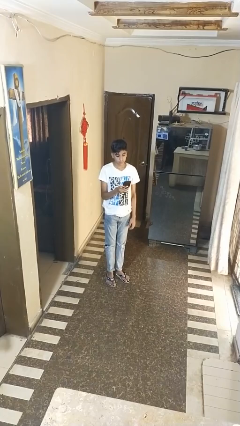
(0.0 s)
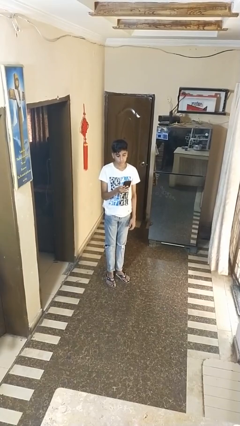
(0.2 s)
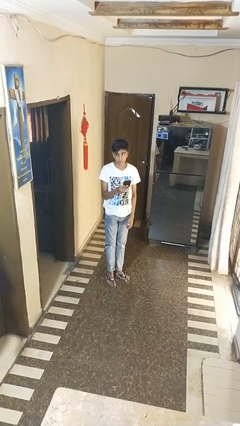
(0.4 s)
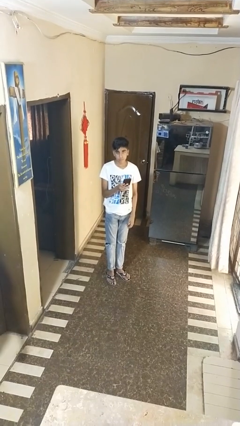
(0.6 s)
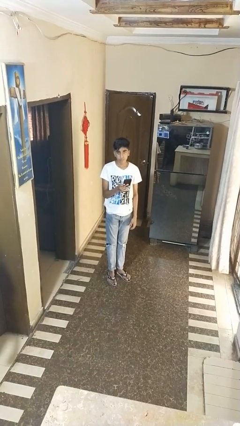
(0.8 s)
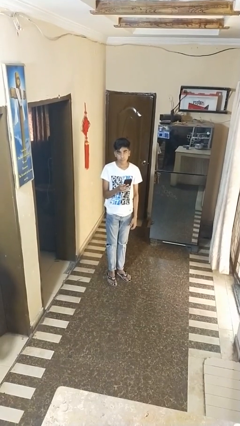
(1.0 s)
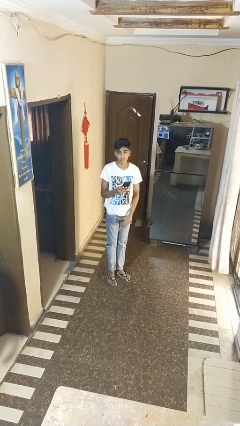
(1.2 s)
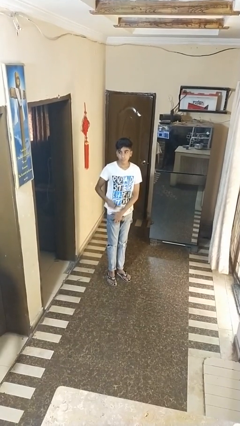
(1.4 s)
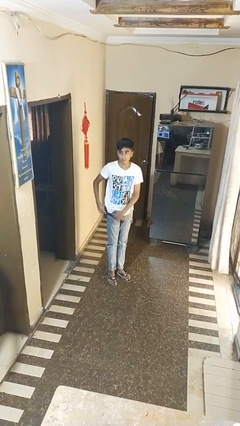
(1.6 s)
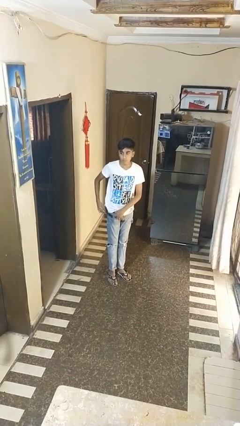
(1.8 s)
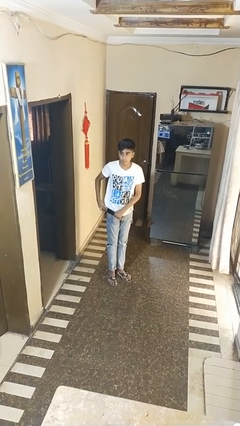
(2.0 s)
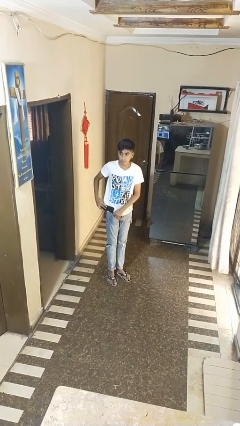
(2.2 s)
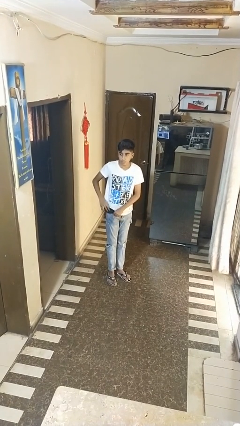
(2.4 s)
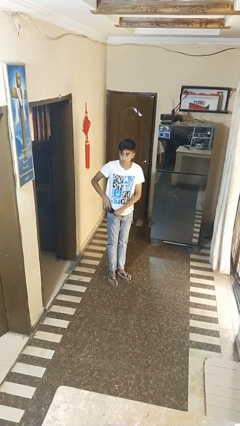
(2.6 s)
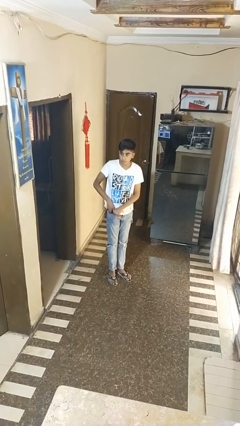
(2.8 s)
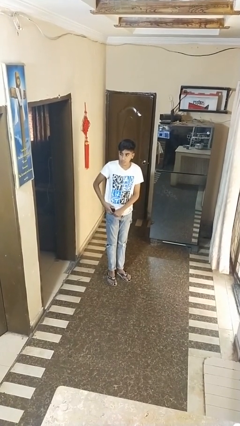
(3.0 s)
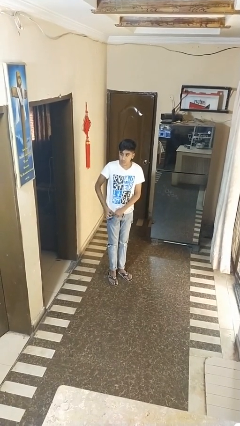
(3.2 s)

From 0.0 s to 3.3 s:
person puts phone into pocket

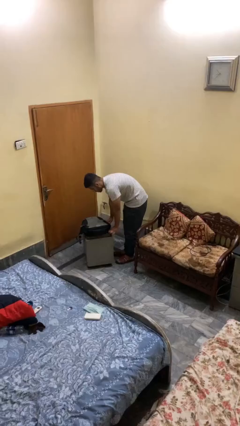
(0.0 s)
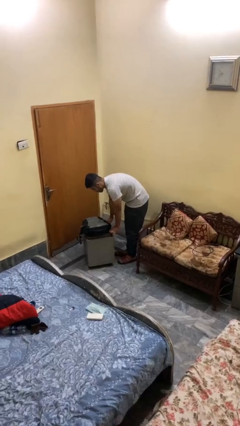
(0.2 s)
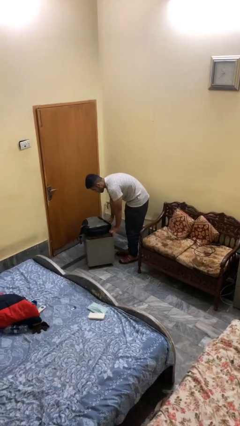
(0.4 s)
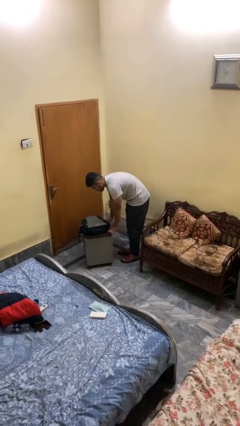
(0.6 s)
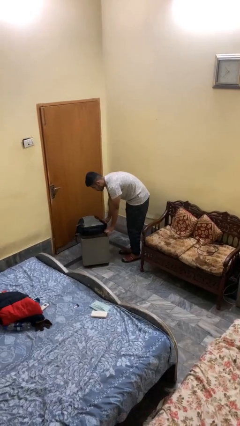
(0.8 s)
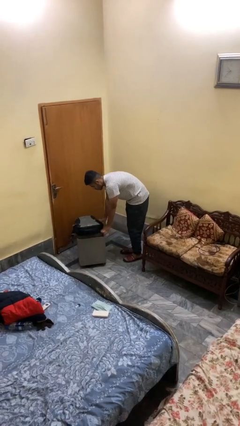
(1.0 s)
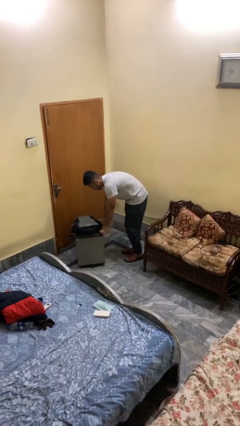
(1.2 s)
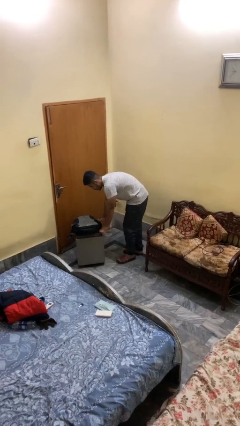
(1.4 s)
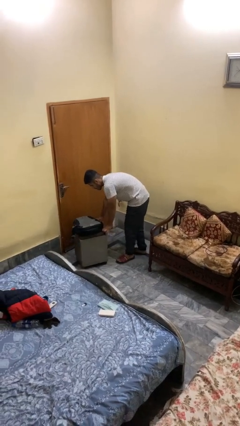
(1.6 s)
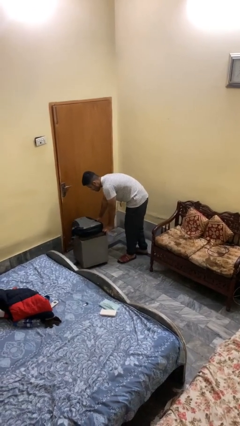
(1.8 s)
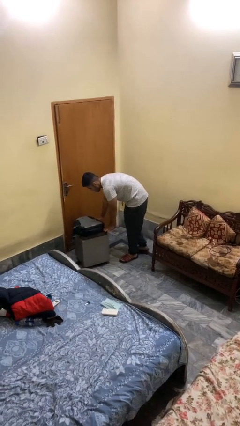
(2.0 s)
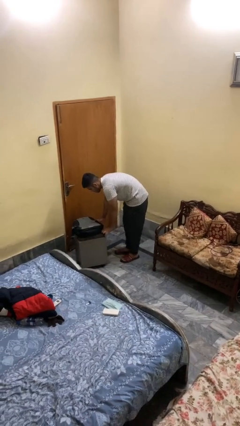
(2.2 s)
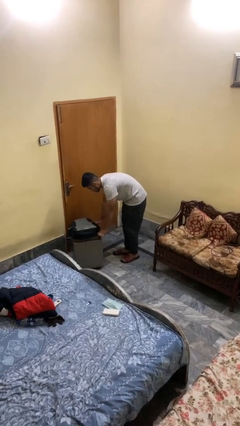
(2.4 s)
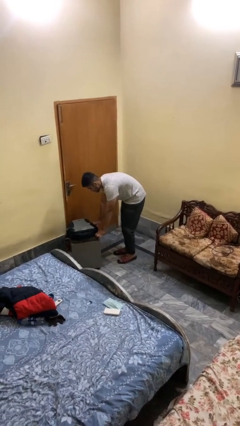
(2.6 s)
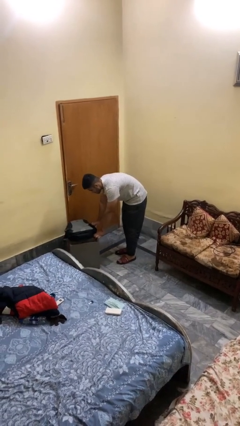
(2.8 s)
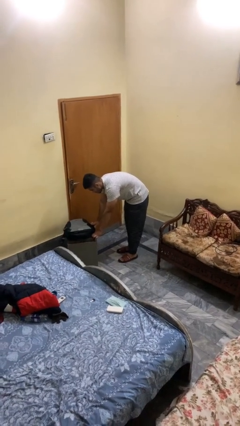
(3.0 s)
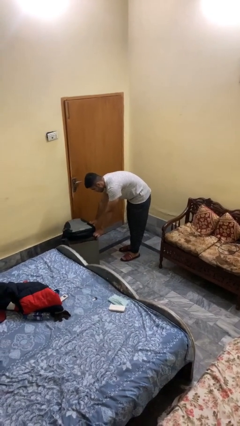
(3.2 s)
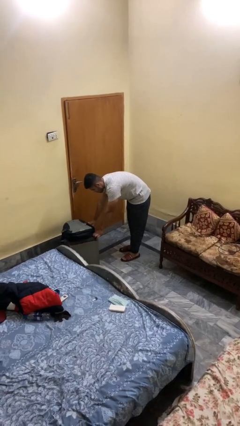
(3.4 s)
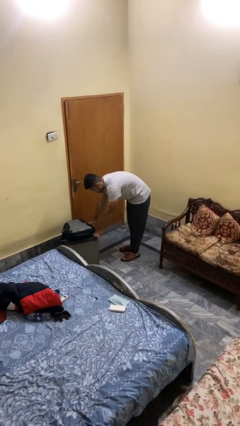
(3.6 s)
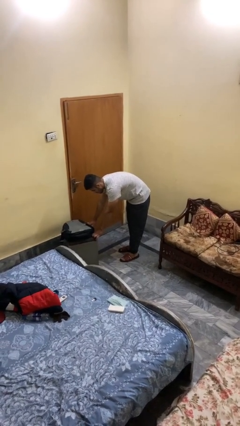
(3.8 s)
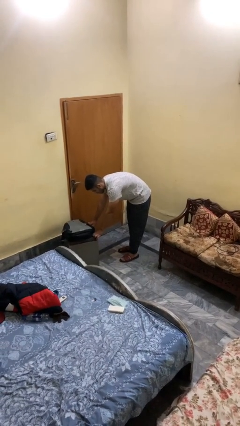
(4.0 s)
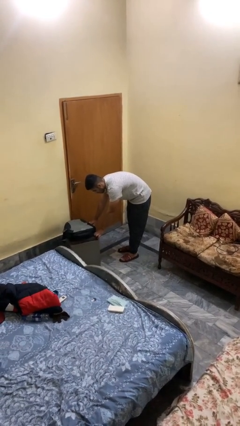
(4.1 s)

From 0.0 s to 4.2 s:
person pushes wheeled cart

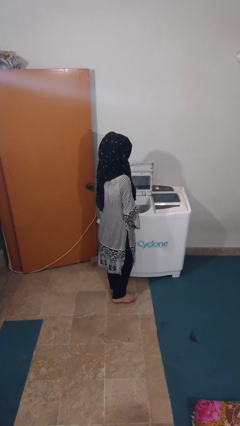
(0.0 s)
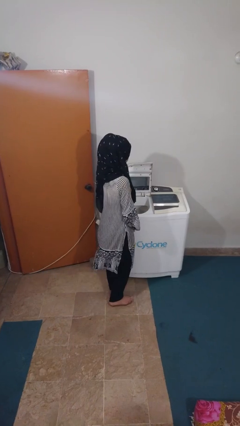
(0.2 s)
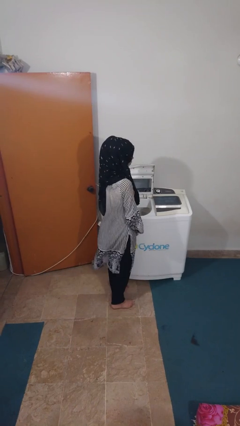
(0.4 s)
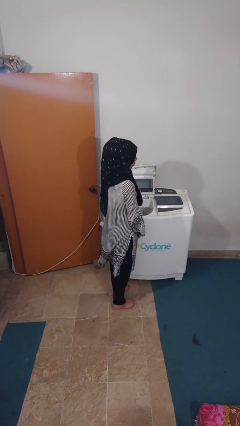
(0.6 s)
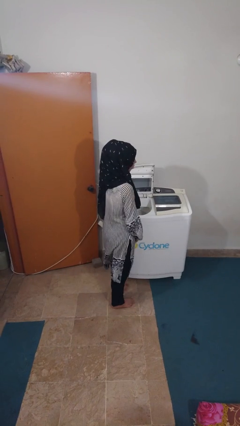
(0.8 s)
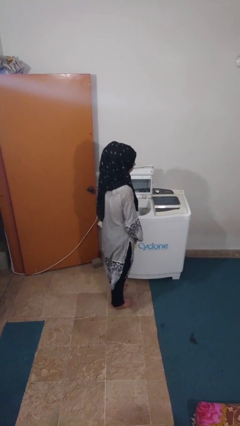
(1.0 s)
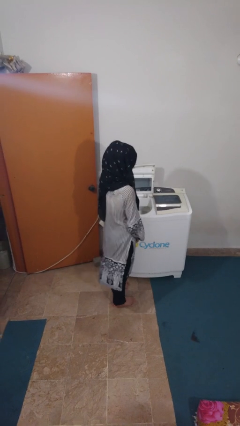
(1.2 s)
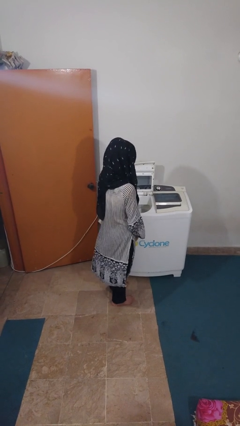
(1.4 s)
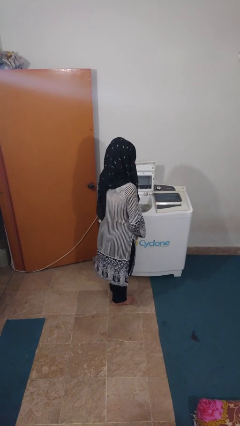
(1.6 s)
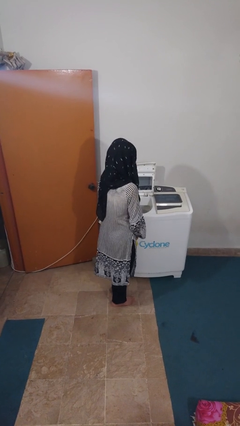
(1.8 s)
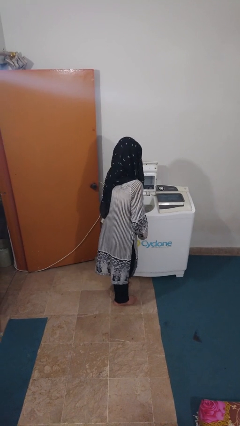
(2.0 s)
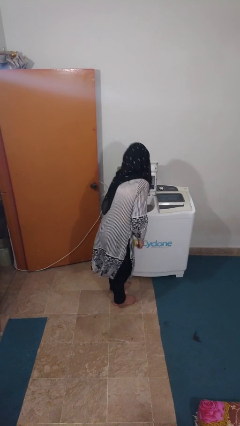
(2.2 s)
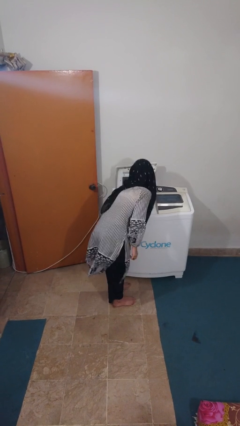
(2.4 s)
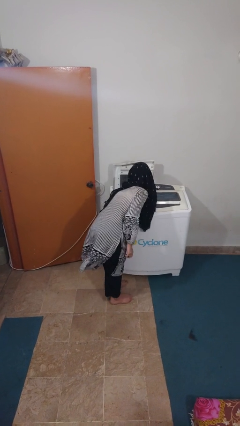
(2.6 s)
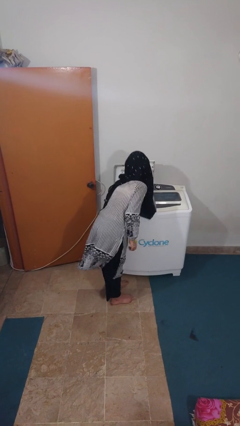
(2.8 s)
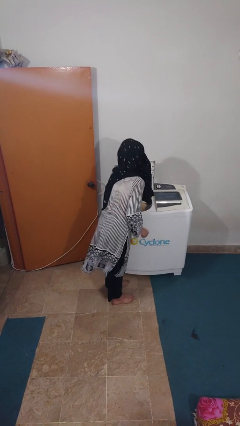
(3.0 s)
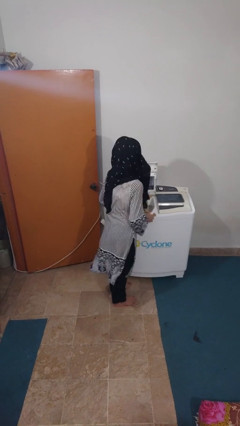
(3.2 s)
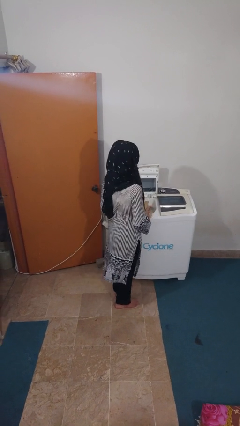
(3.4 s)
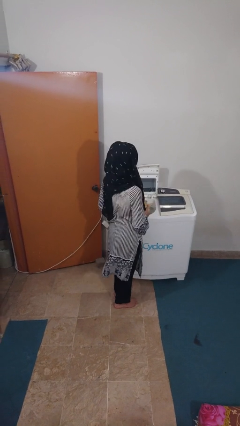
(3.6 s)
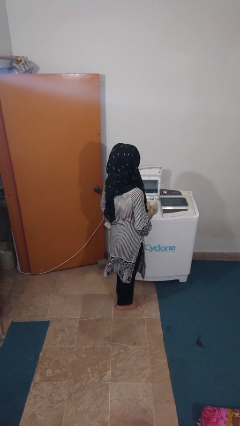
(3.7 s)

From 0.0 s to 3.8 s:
person unloads clotheswasher

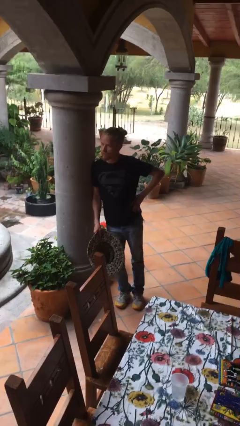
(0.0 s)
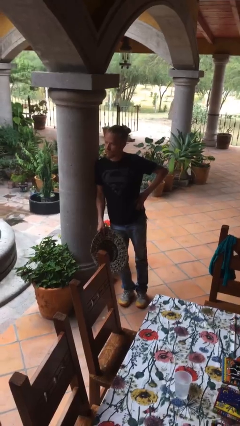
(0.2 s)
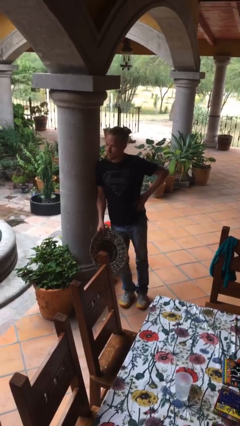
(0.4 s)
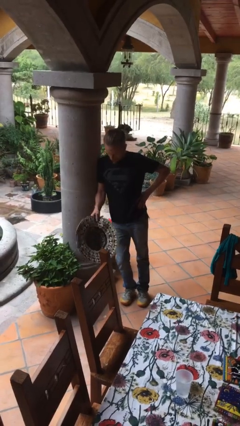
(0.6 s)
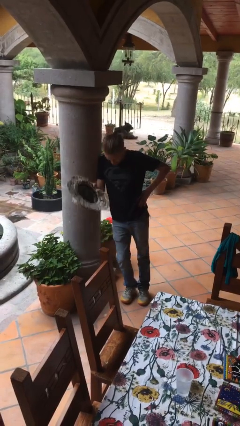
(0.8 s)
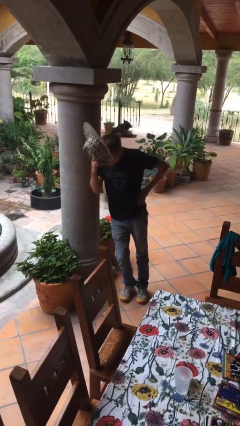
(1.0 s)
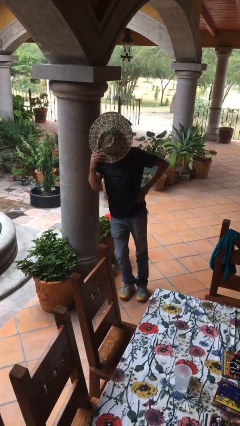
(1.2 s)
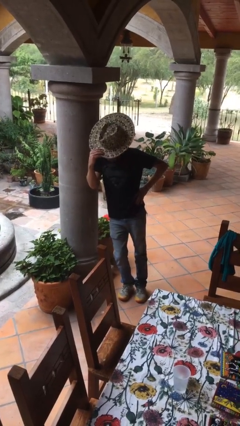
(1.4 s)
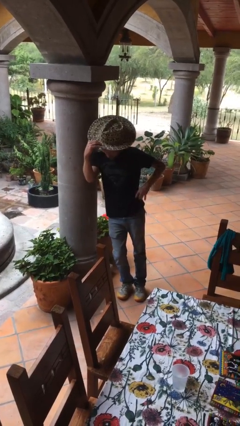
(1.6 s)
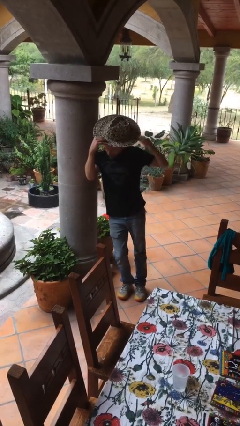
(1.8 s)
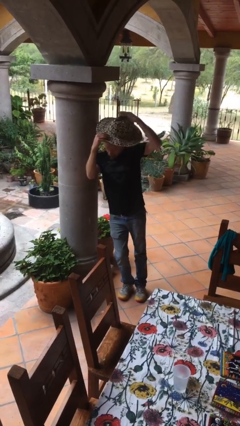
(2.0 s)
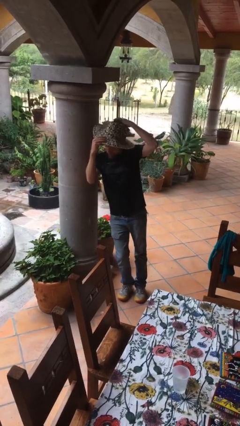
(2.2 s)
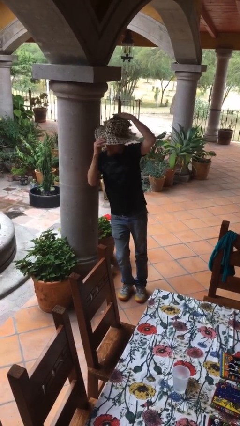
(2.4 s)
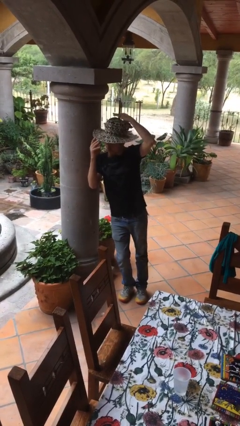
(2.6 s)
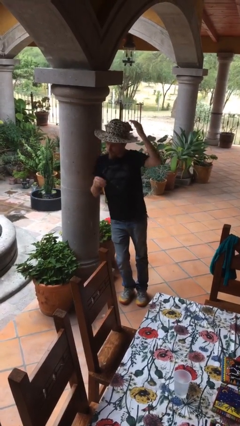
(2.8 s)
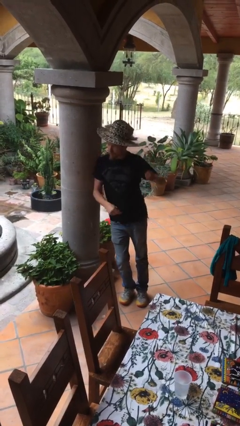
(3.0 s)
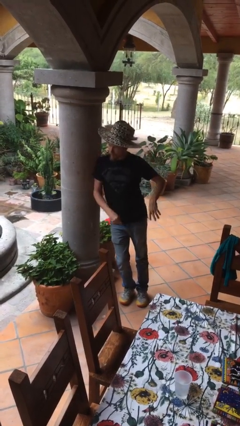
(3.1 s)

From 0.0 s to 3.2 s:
person puts on hat

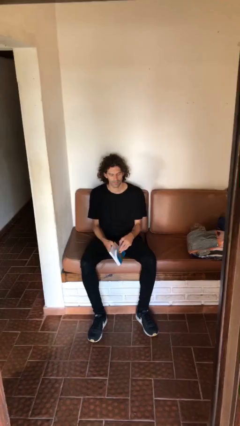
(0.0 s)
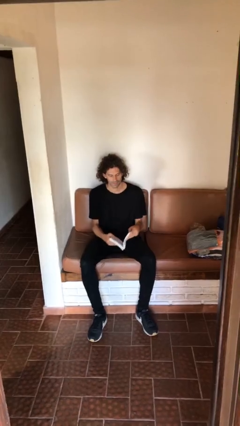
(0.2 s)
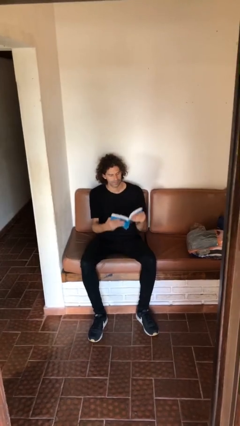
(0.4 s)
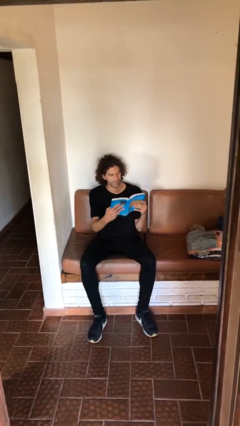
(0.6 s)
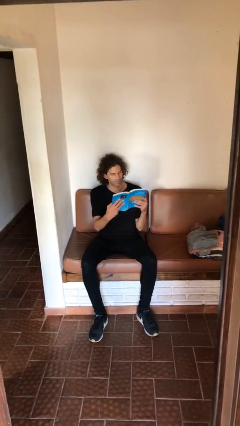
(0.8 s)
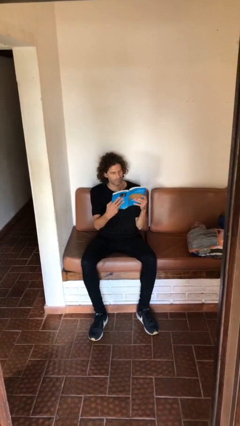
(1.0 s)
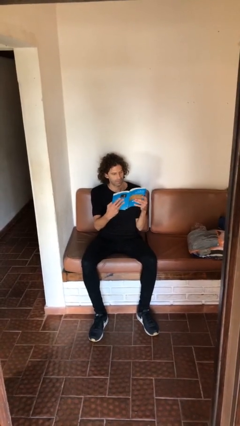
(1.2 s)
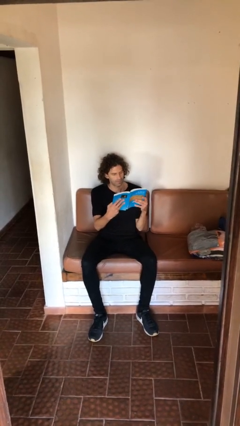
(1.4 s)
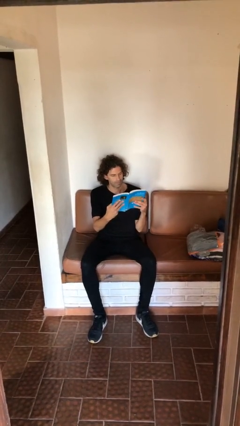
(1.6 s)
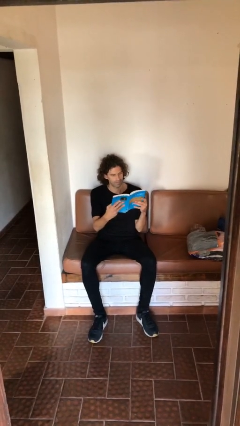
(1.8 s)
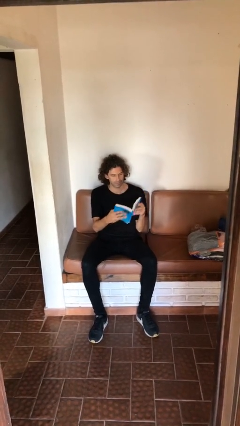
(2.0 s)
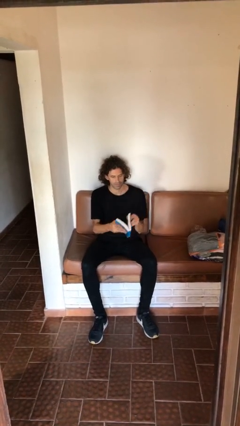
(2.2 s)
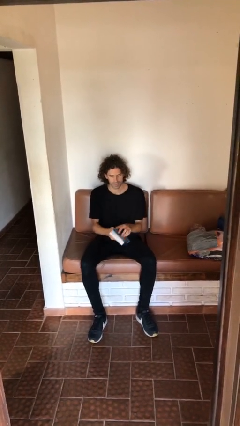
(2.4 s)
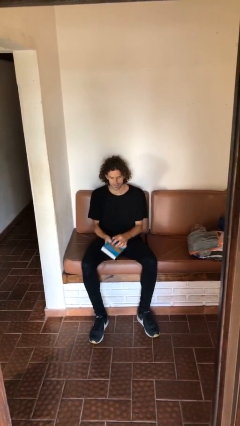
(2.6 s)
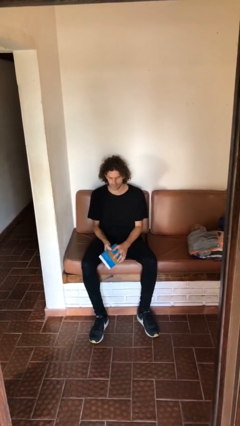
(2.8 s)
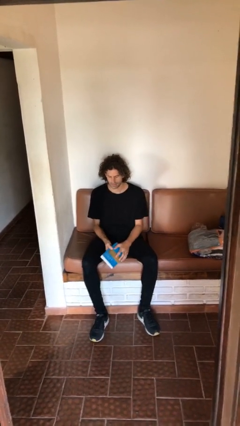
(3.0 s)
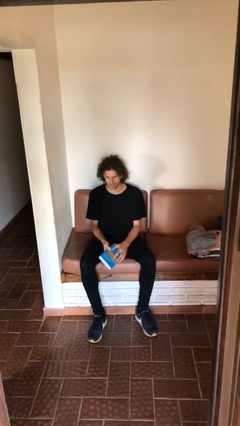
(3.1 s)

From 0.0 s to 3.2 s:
person reads document

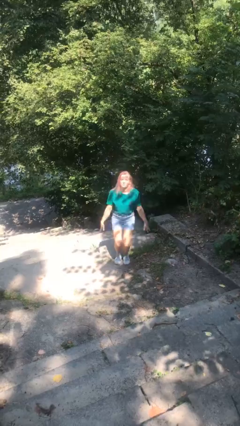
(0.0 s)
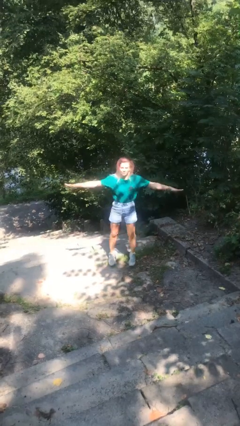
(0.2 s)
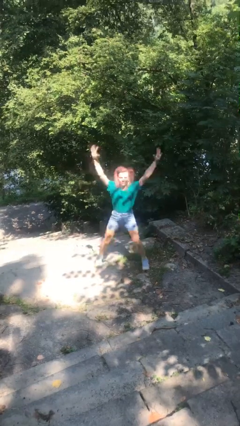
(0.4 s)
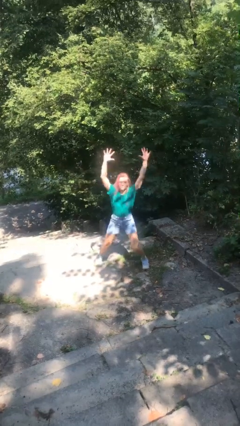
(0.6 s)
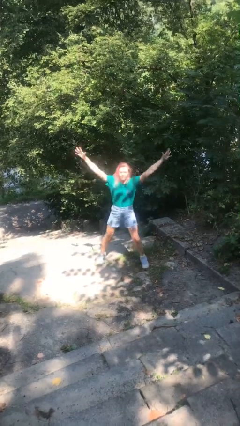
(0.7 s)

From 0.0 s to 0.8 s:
person exercises with jumping jacks
